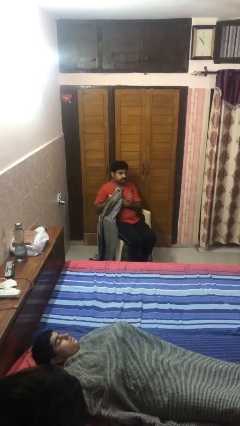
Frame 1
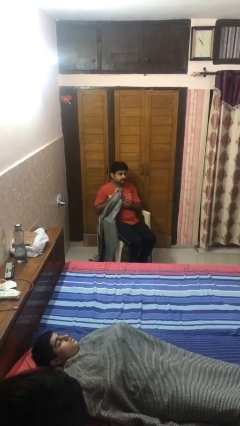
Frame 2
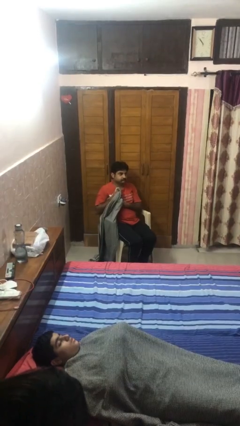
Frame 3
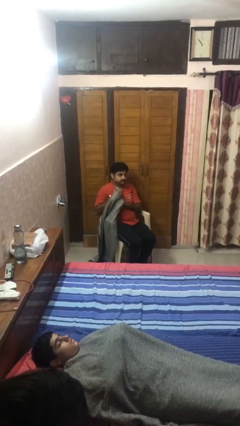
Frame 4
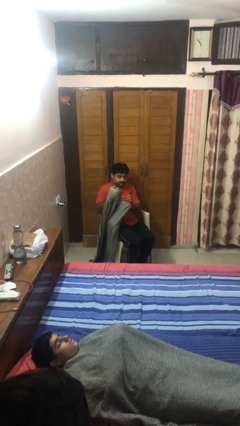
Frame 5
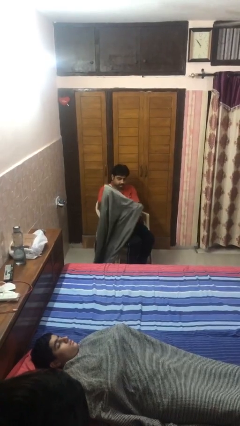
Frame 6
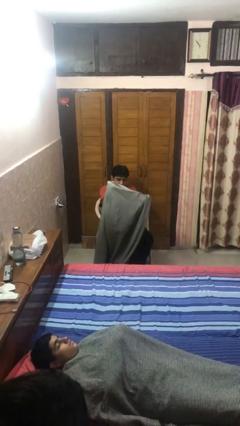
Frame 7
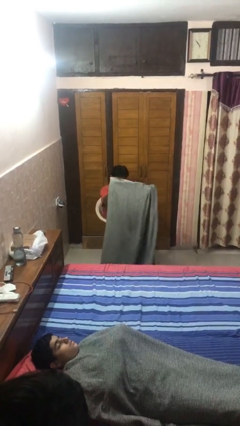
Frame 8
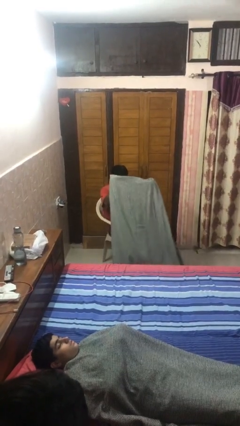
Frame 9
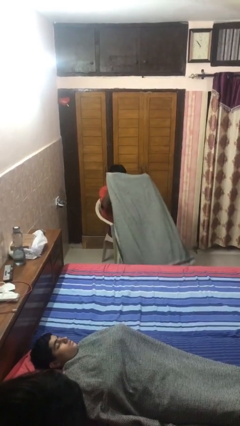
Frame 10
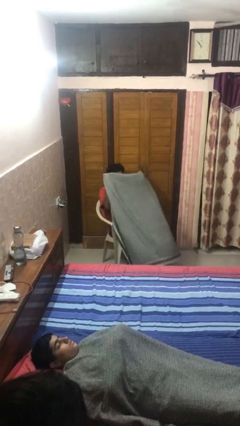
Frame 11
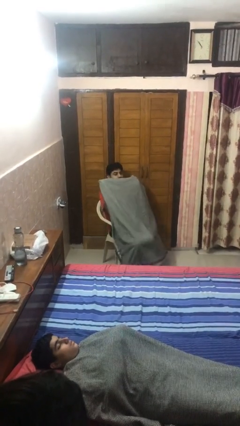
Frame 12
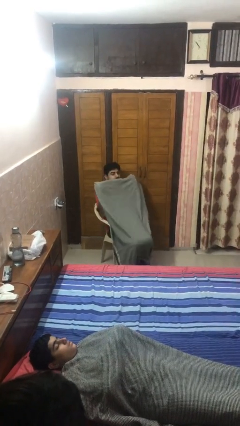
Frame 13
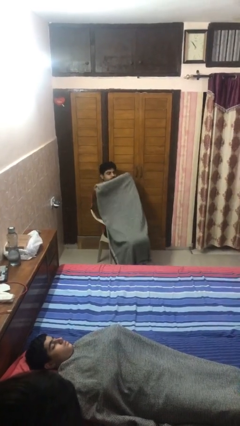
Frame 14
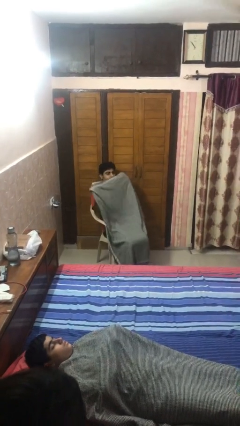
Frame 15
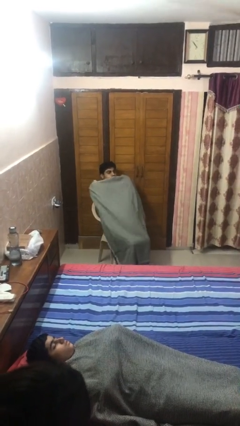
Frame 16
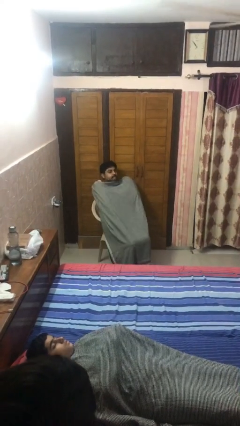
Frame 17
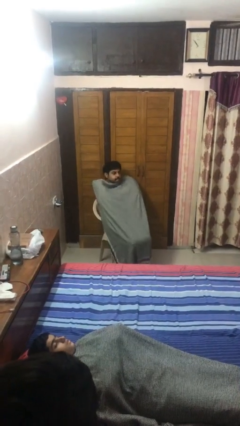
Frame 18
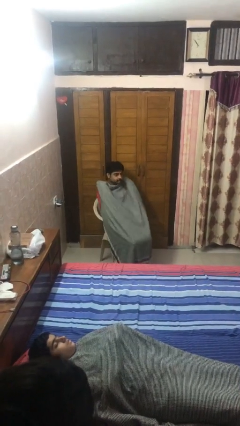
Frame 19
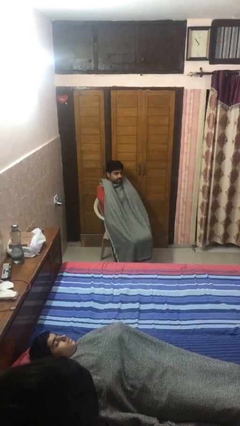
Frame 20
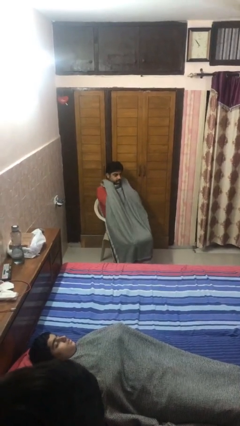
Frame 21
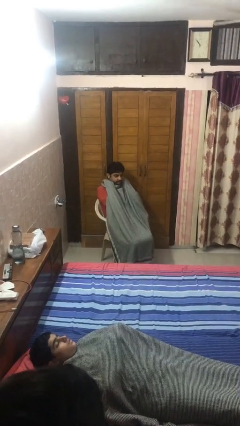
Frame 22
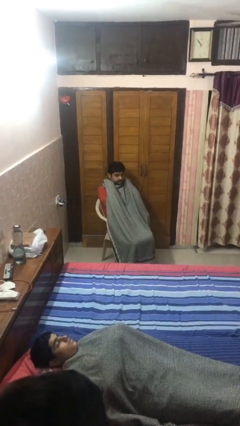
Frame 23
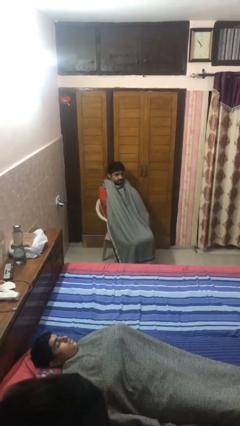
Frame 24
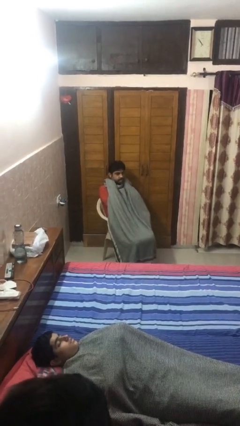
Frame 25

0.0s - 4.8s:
person covers with blanket

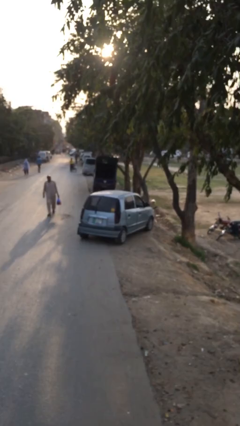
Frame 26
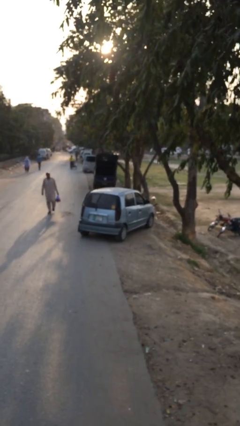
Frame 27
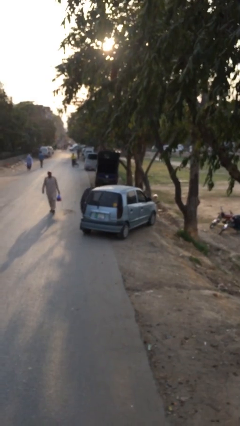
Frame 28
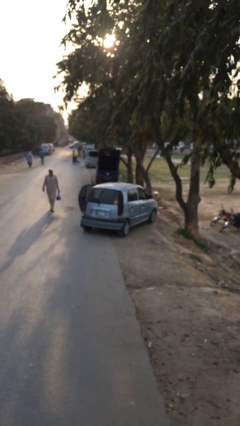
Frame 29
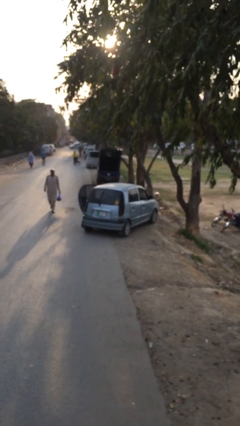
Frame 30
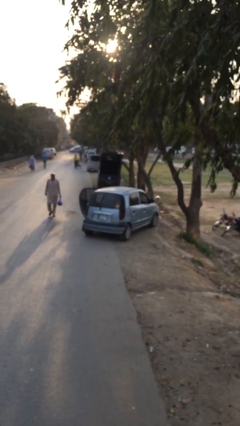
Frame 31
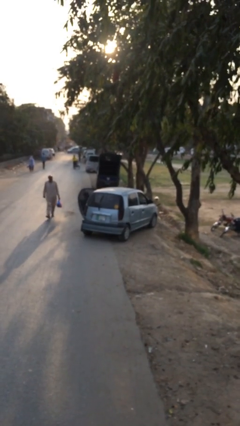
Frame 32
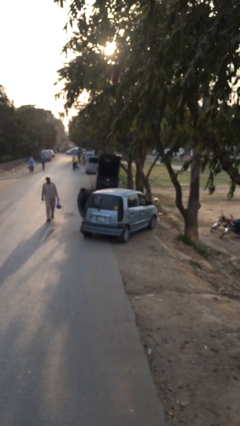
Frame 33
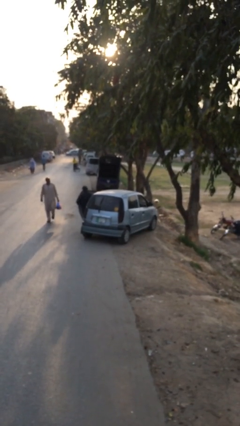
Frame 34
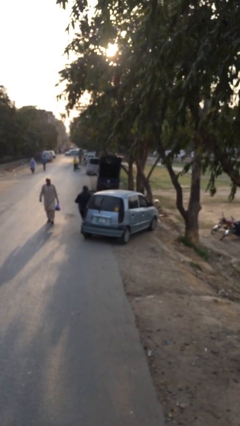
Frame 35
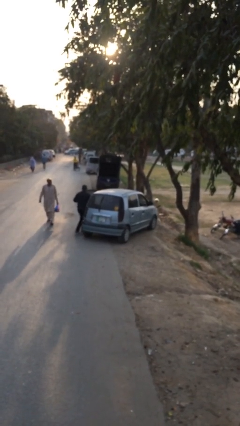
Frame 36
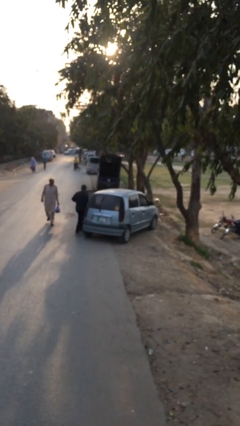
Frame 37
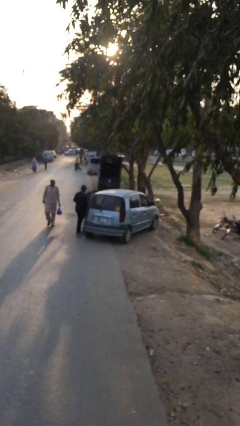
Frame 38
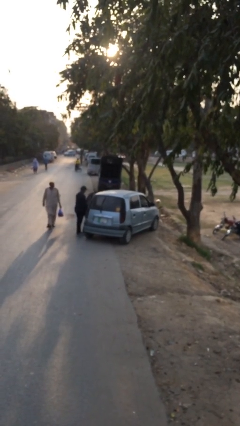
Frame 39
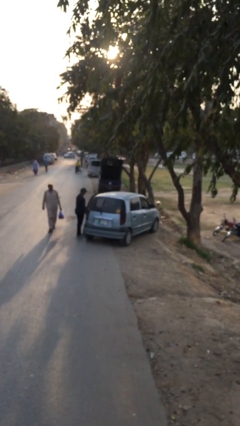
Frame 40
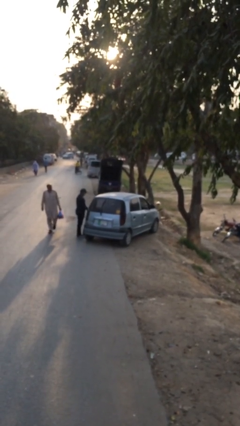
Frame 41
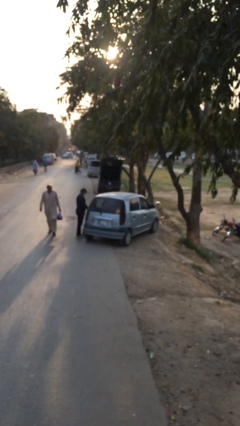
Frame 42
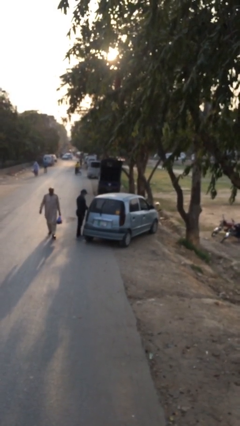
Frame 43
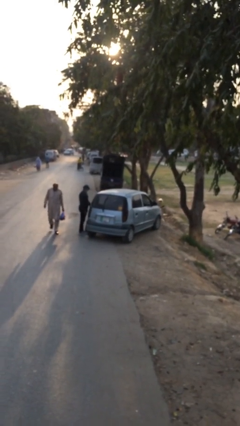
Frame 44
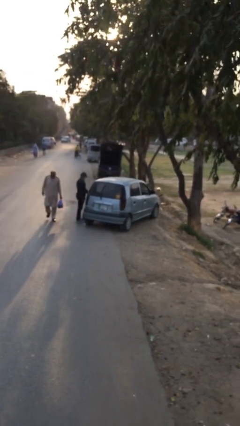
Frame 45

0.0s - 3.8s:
car drops off person

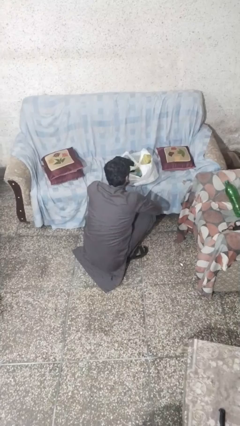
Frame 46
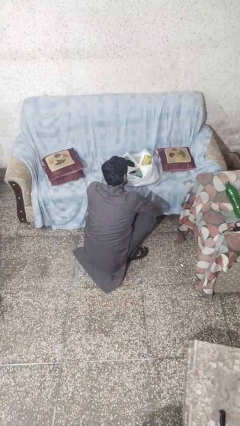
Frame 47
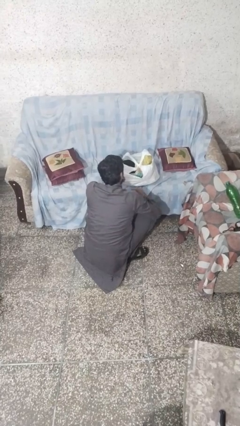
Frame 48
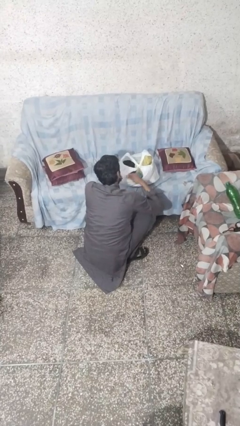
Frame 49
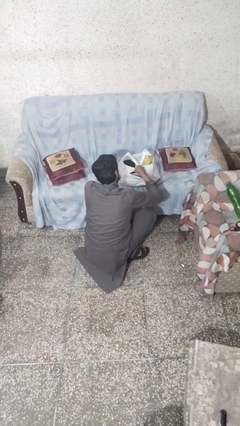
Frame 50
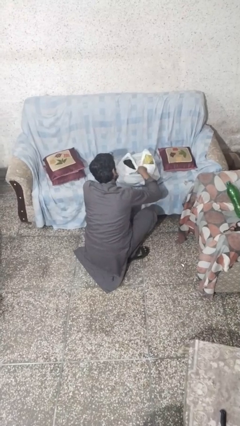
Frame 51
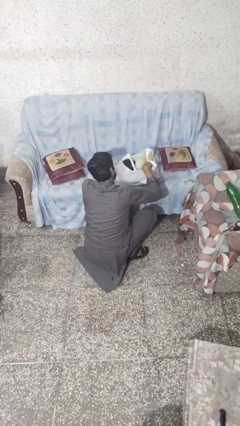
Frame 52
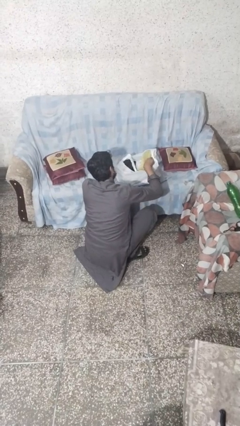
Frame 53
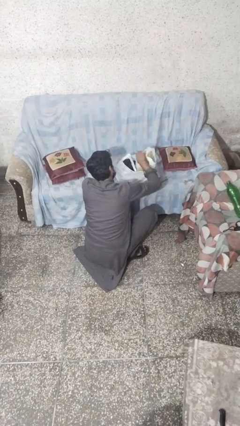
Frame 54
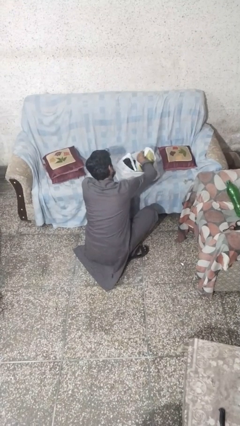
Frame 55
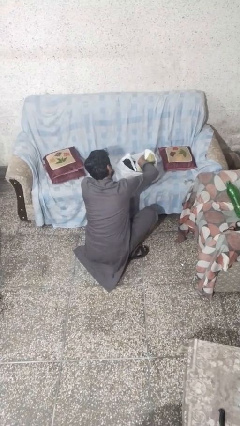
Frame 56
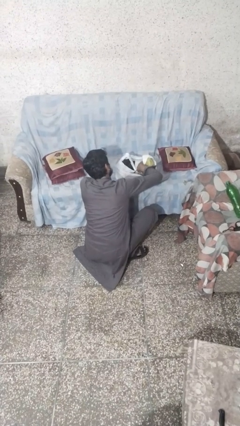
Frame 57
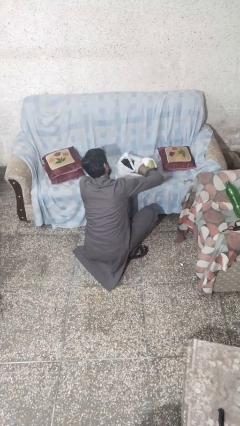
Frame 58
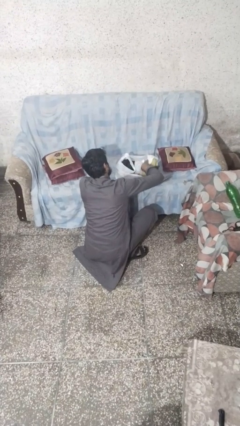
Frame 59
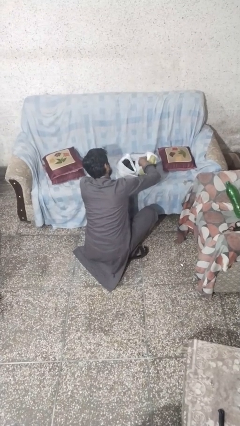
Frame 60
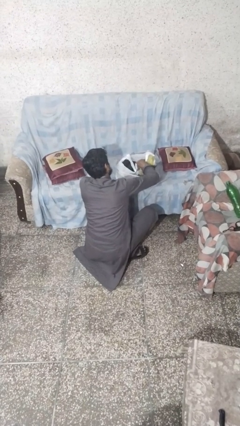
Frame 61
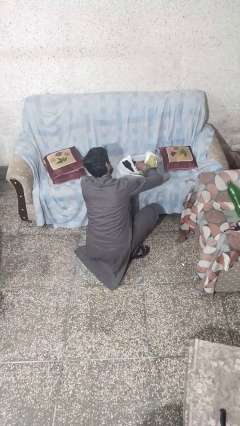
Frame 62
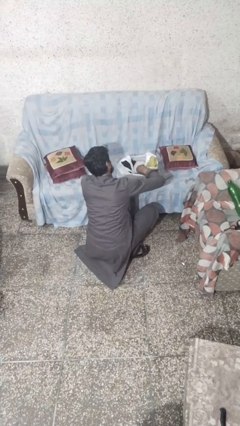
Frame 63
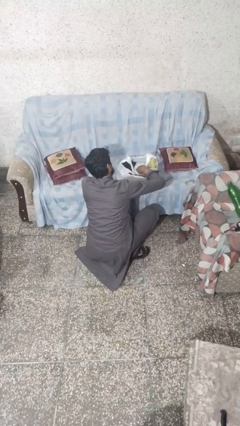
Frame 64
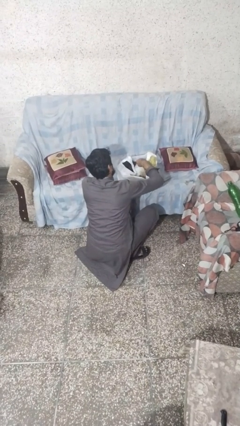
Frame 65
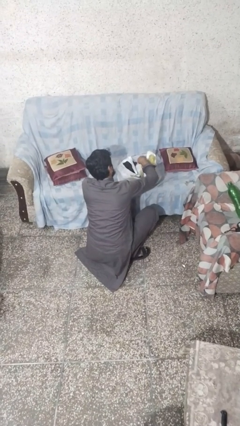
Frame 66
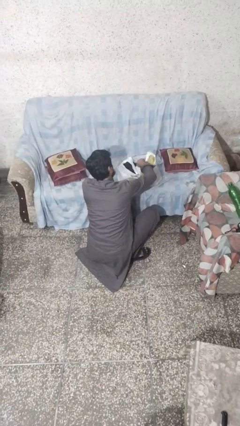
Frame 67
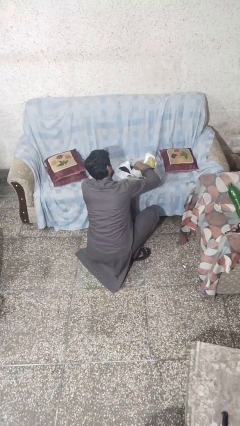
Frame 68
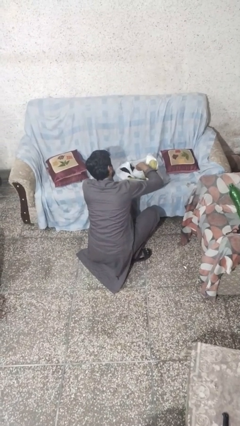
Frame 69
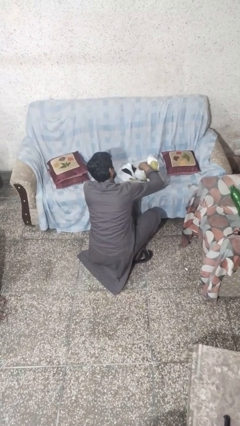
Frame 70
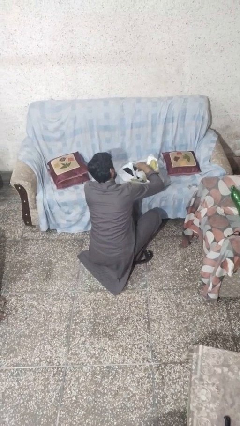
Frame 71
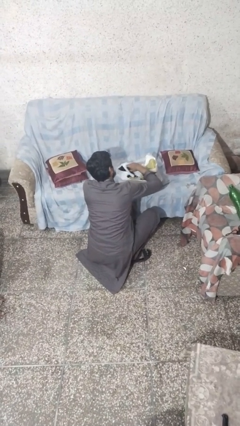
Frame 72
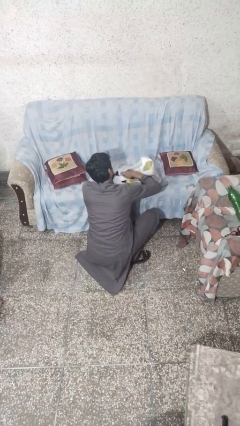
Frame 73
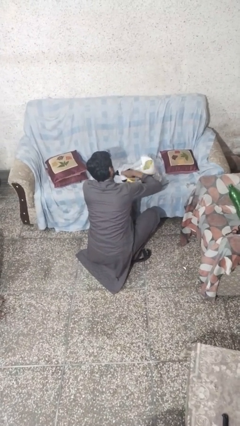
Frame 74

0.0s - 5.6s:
person searches in bag

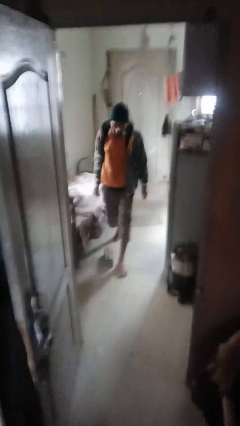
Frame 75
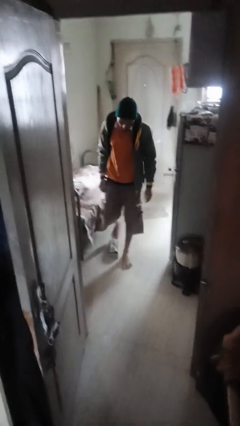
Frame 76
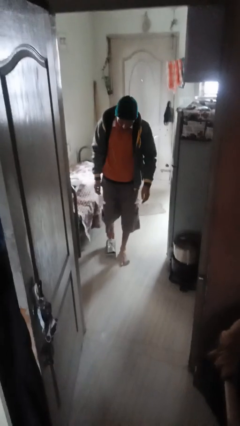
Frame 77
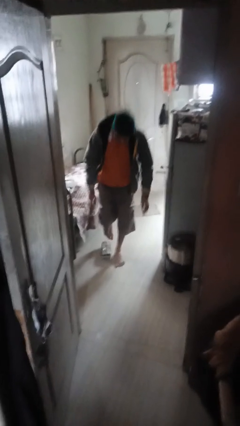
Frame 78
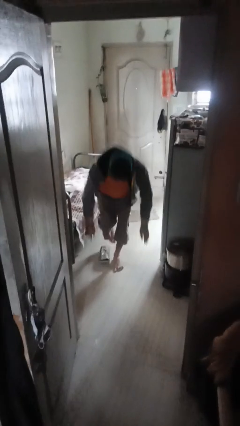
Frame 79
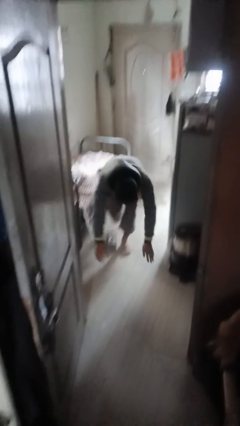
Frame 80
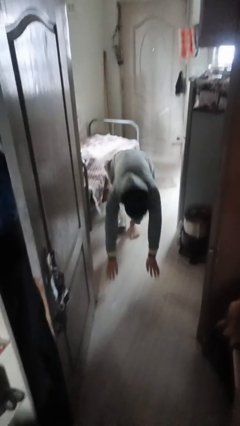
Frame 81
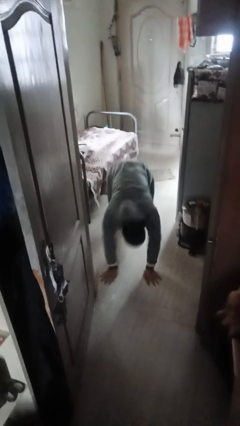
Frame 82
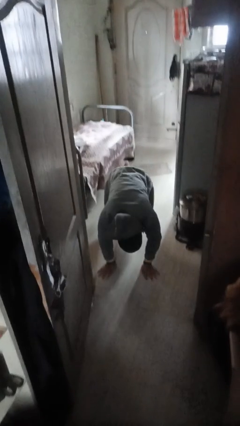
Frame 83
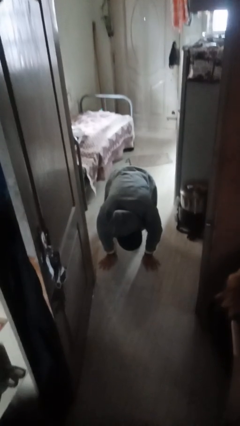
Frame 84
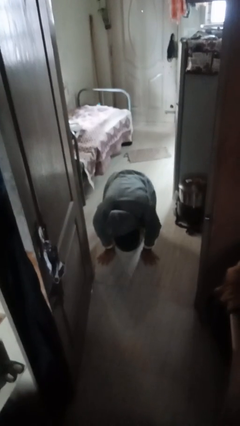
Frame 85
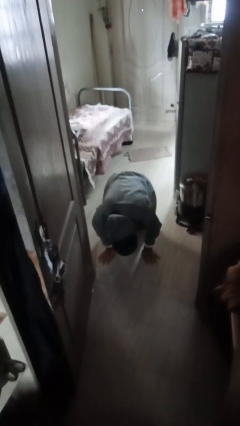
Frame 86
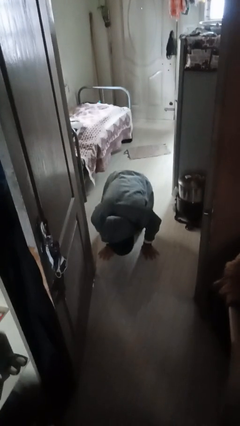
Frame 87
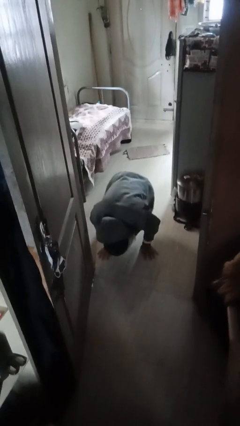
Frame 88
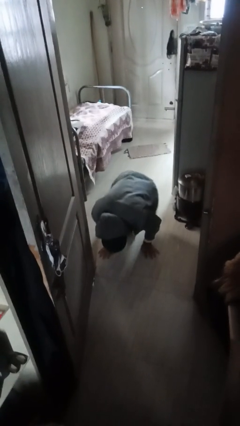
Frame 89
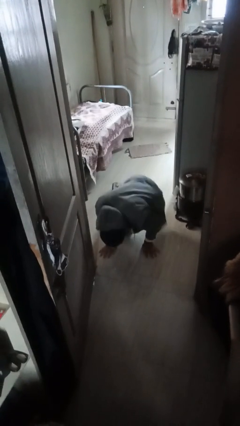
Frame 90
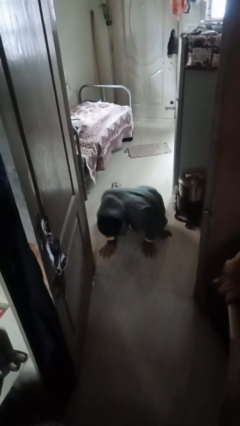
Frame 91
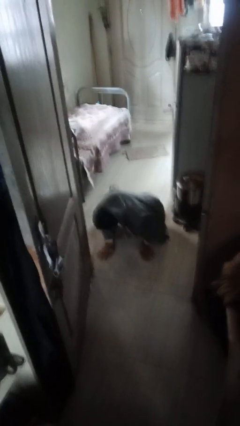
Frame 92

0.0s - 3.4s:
person trips on object on floor

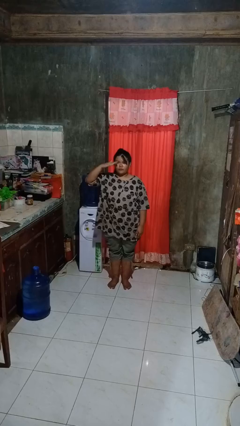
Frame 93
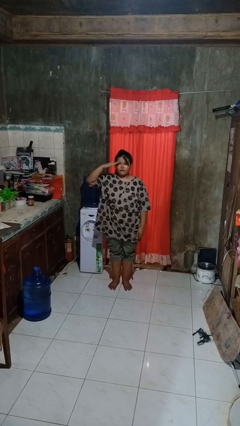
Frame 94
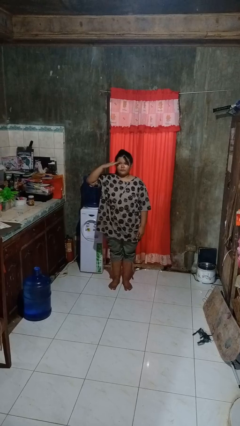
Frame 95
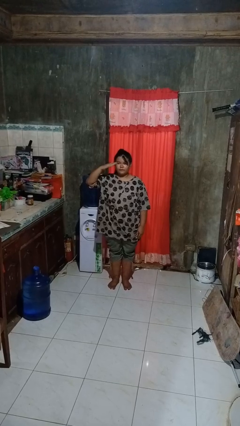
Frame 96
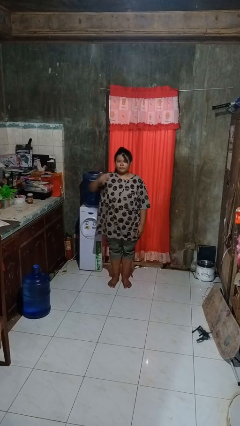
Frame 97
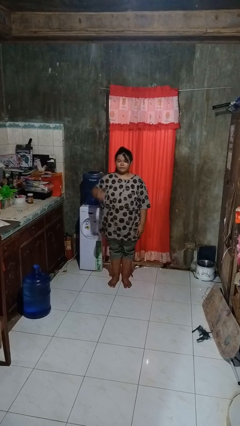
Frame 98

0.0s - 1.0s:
person salutes
